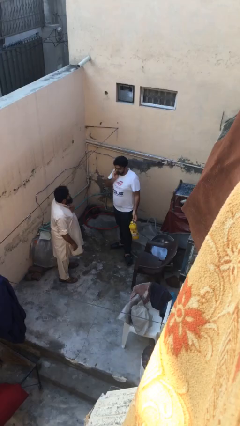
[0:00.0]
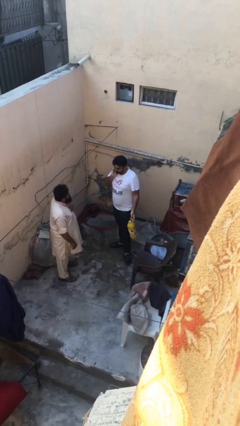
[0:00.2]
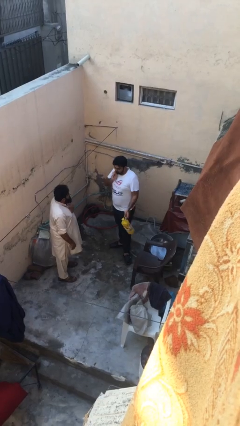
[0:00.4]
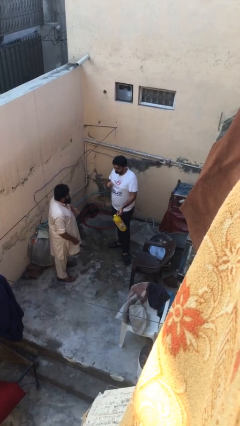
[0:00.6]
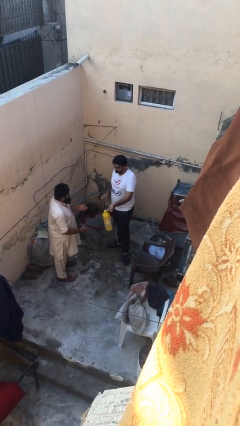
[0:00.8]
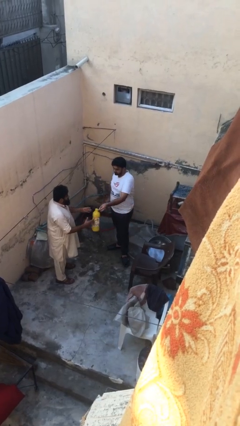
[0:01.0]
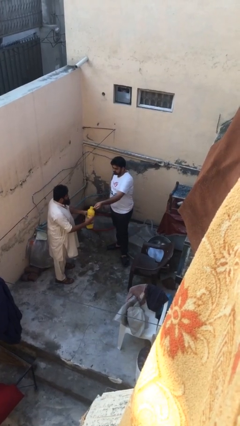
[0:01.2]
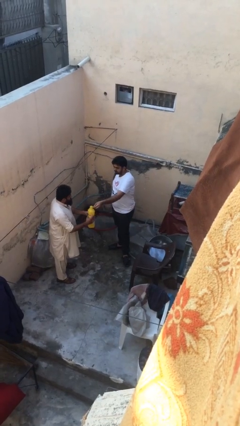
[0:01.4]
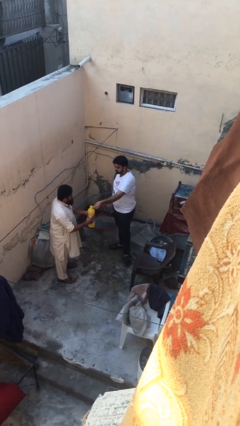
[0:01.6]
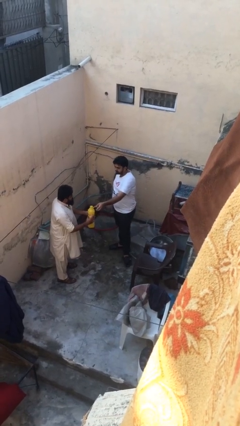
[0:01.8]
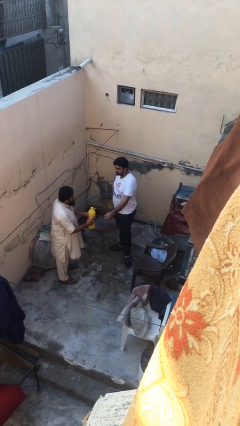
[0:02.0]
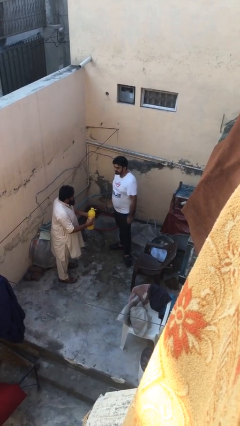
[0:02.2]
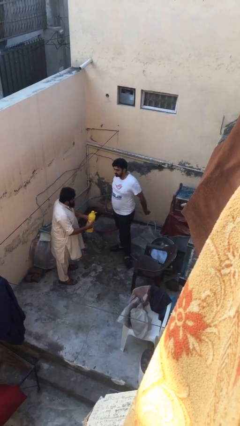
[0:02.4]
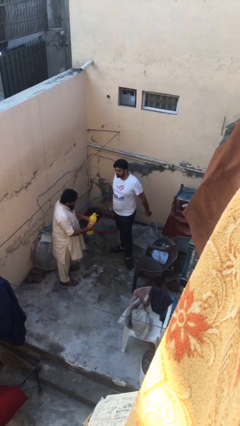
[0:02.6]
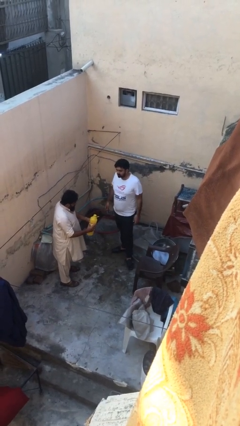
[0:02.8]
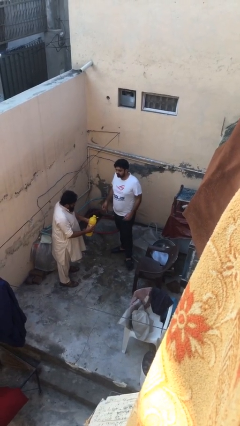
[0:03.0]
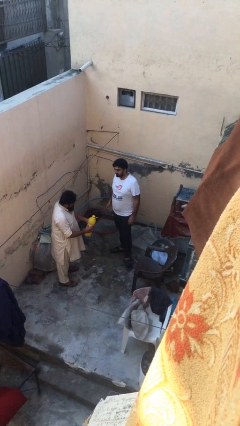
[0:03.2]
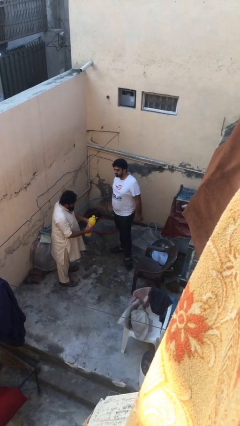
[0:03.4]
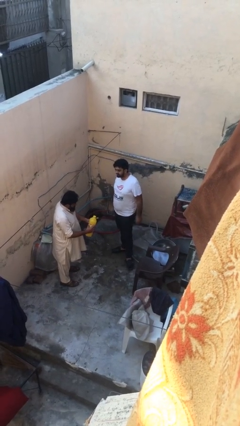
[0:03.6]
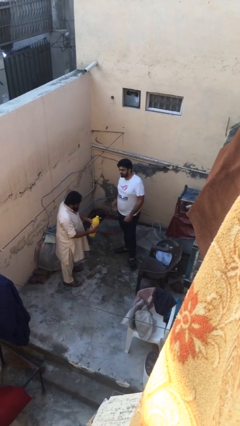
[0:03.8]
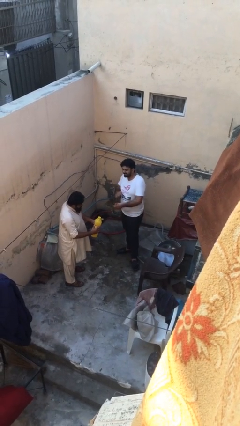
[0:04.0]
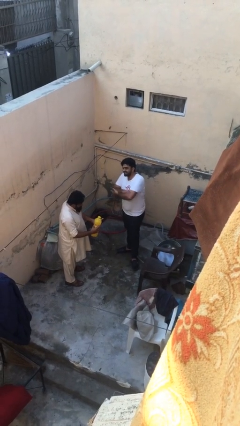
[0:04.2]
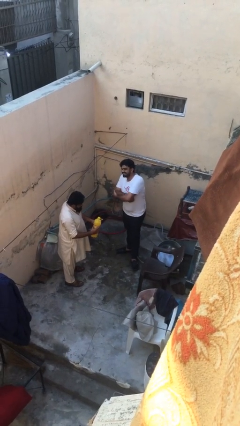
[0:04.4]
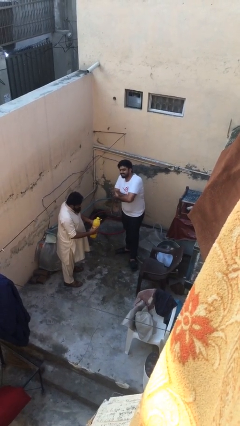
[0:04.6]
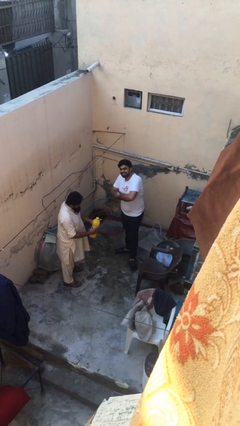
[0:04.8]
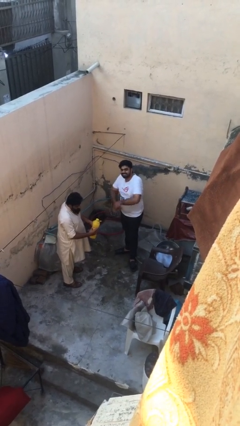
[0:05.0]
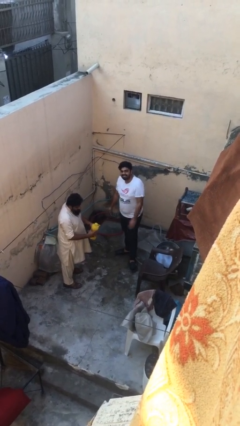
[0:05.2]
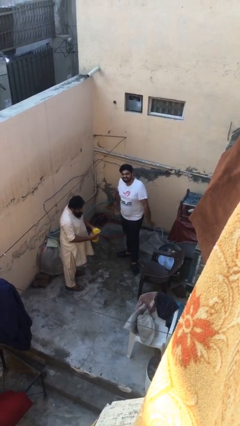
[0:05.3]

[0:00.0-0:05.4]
person transfers object to person

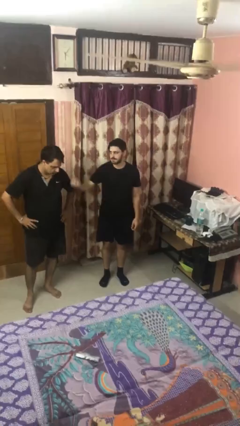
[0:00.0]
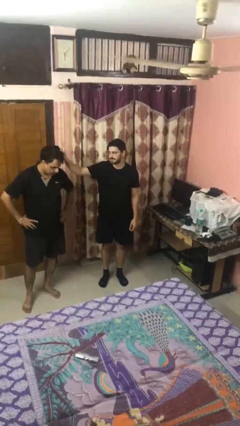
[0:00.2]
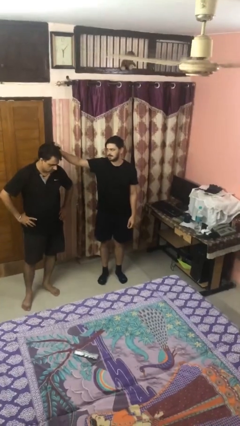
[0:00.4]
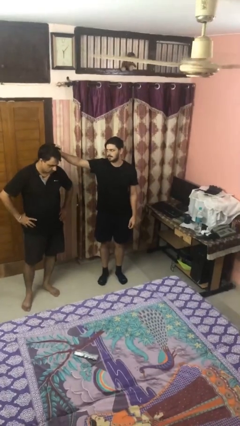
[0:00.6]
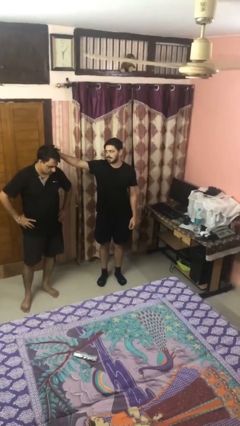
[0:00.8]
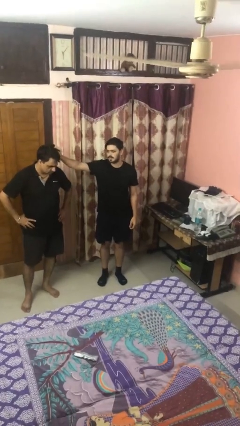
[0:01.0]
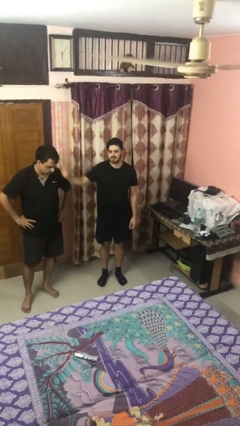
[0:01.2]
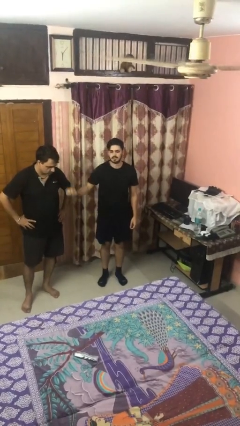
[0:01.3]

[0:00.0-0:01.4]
person grabs person by hair

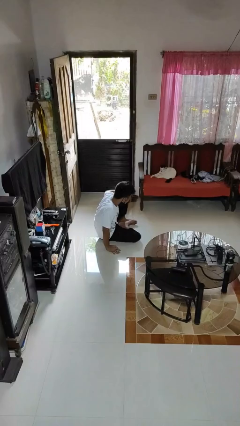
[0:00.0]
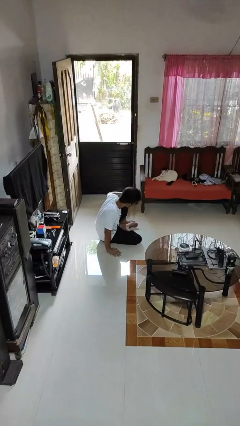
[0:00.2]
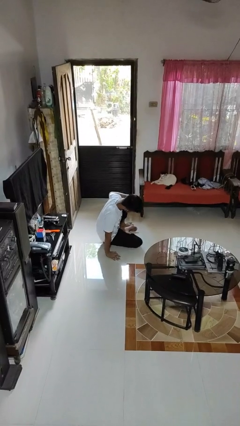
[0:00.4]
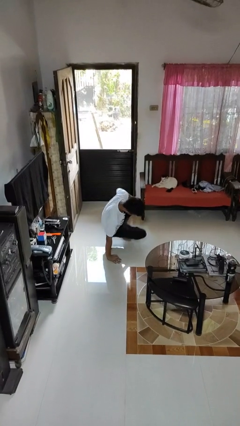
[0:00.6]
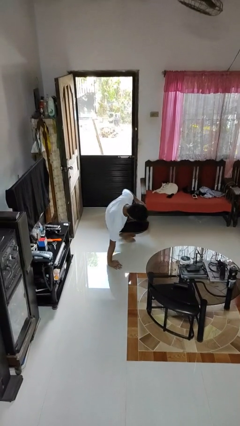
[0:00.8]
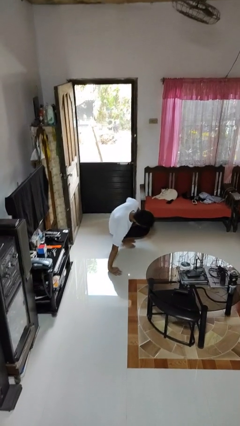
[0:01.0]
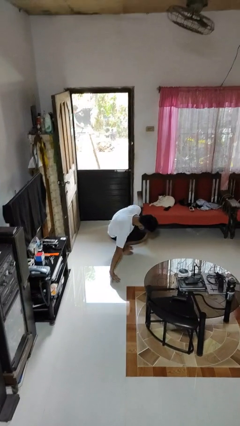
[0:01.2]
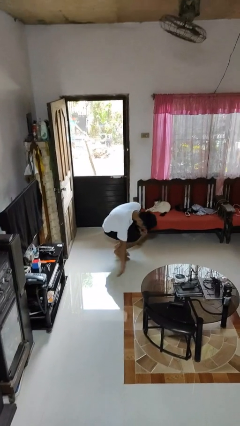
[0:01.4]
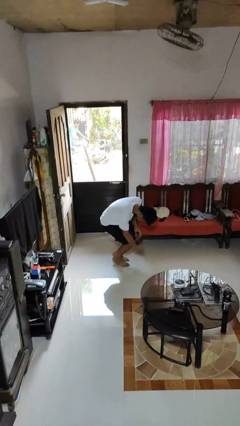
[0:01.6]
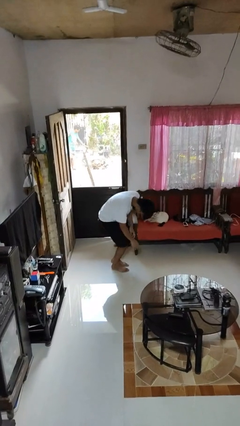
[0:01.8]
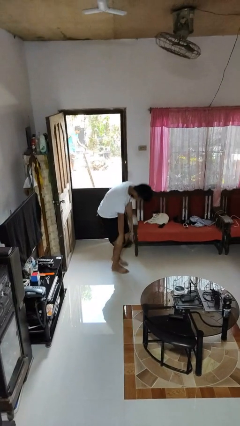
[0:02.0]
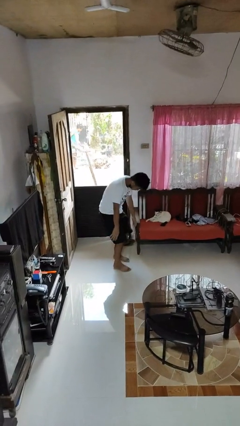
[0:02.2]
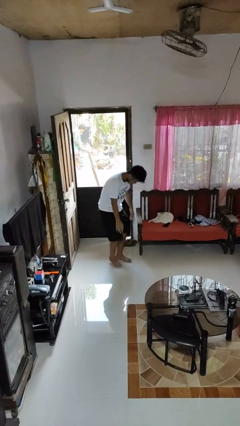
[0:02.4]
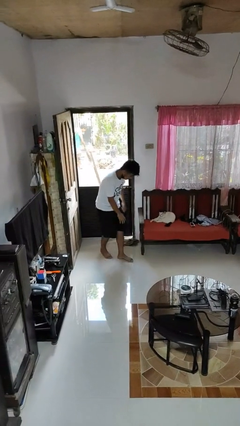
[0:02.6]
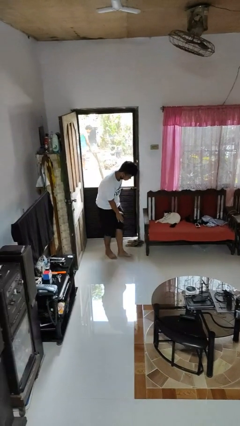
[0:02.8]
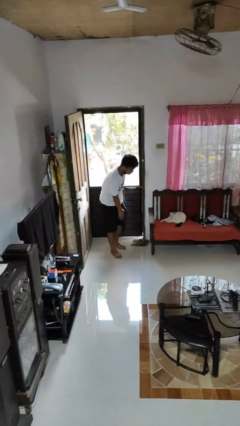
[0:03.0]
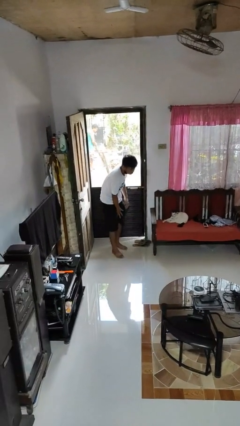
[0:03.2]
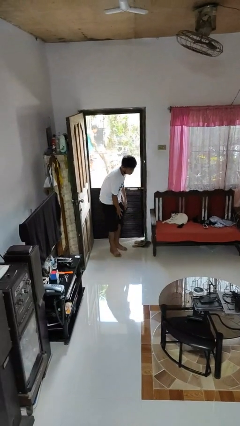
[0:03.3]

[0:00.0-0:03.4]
person stands up from floor

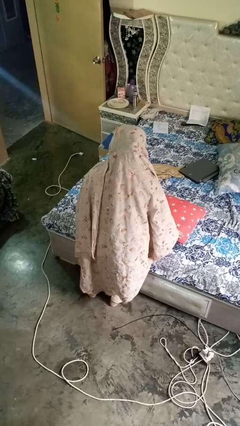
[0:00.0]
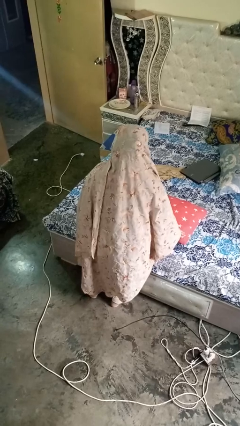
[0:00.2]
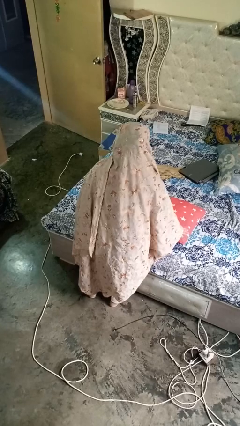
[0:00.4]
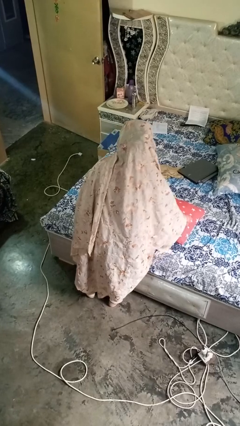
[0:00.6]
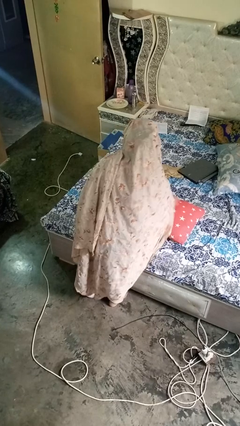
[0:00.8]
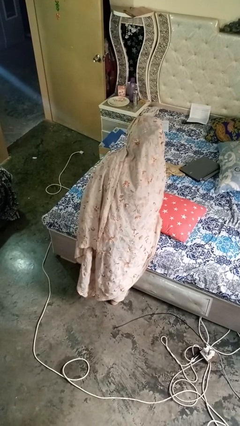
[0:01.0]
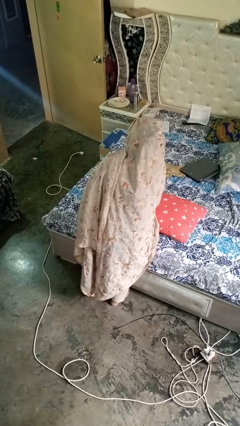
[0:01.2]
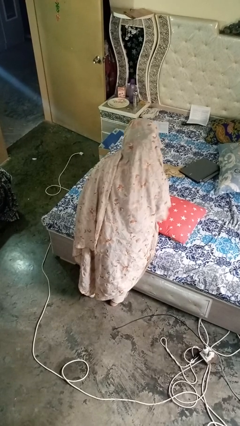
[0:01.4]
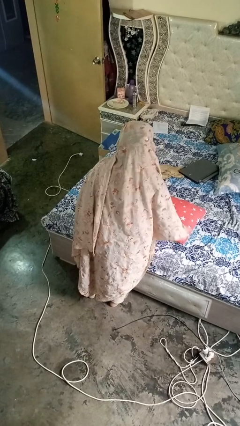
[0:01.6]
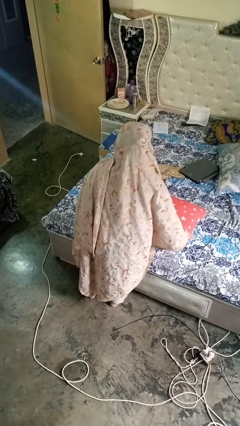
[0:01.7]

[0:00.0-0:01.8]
person waves hand over object

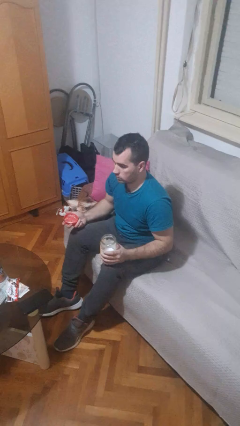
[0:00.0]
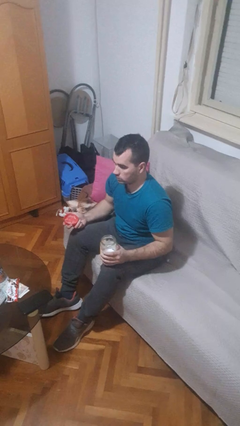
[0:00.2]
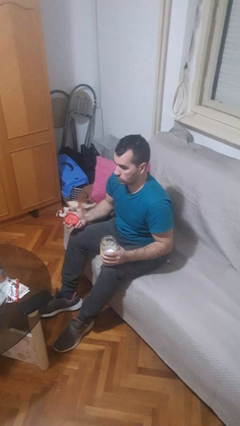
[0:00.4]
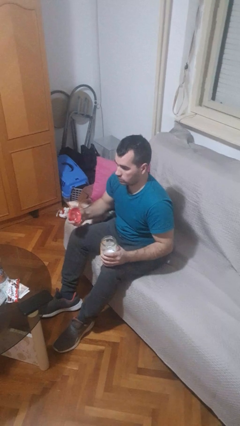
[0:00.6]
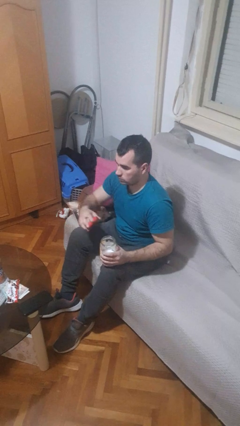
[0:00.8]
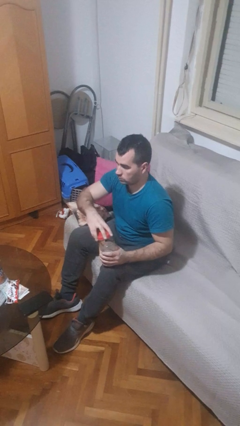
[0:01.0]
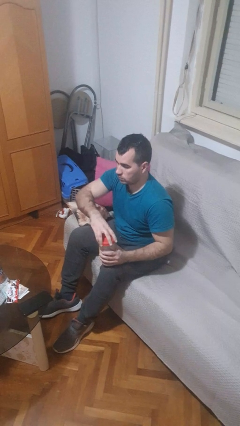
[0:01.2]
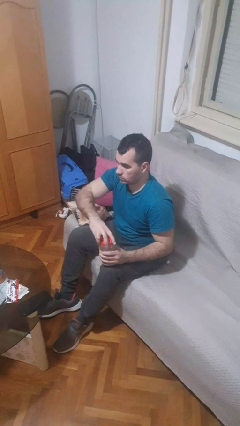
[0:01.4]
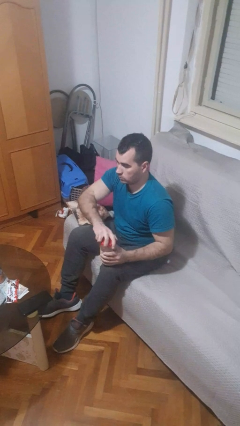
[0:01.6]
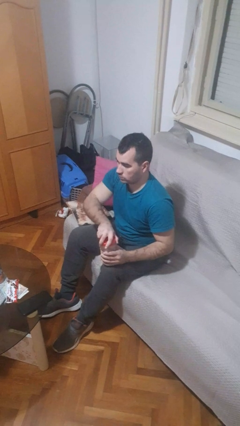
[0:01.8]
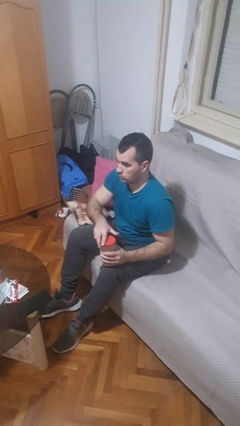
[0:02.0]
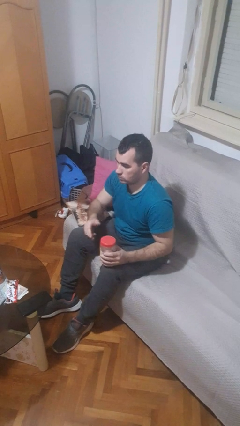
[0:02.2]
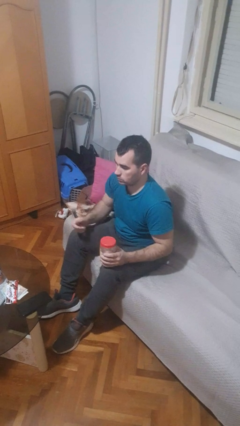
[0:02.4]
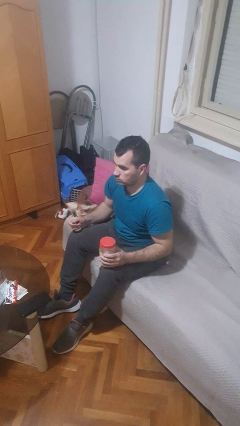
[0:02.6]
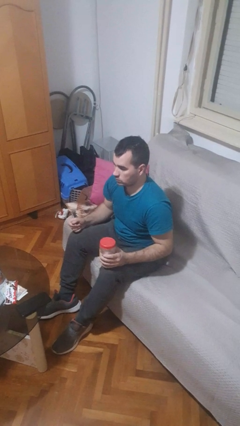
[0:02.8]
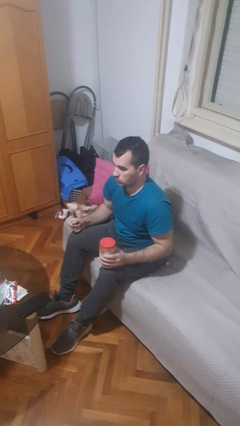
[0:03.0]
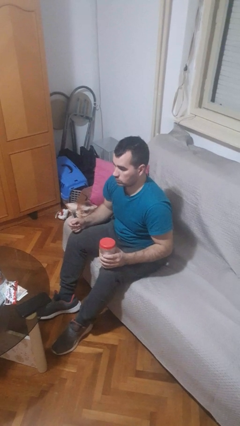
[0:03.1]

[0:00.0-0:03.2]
person closes jar

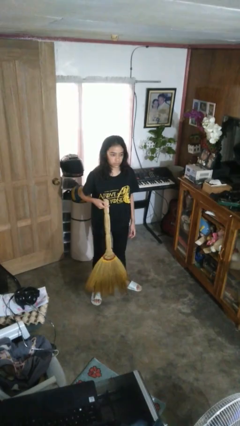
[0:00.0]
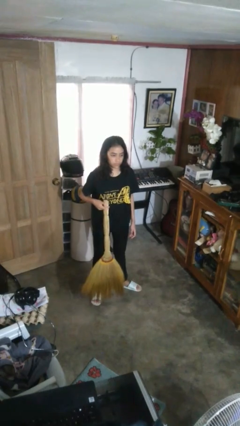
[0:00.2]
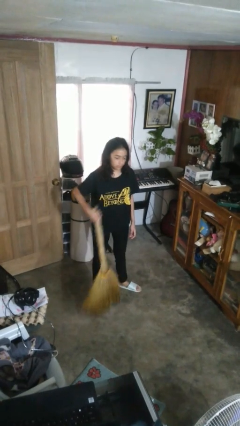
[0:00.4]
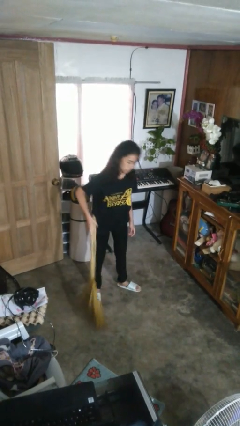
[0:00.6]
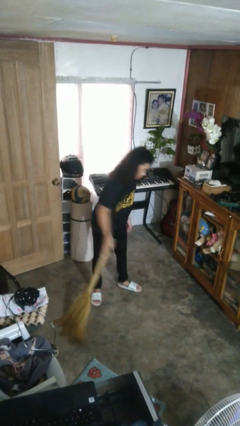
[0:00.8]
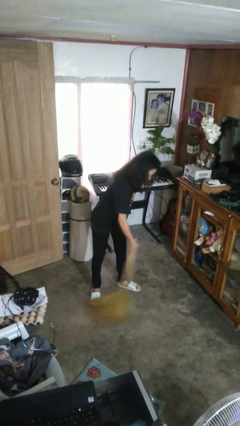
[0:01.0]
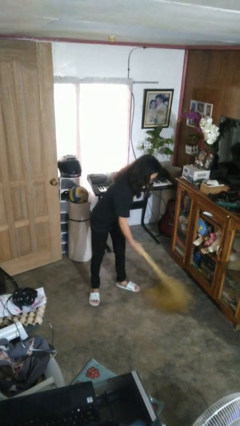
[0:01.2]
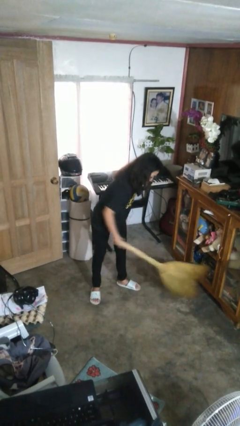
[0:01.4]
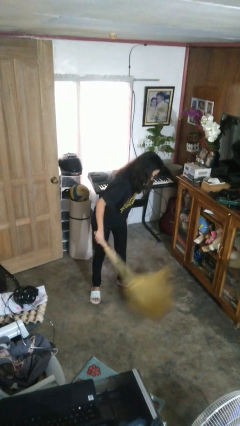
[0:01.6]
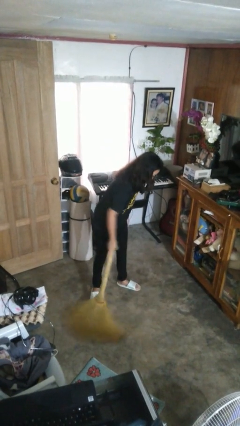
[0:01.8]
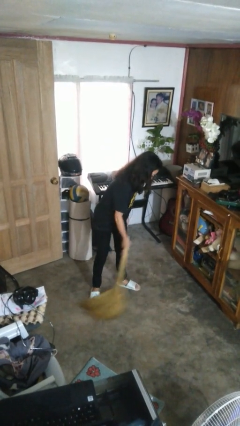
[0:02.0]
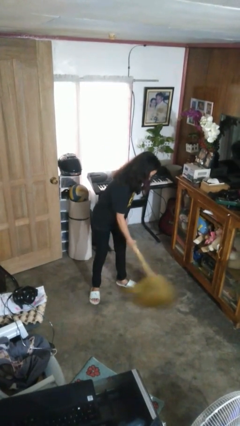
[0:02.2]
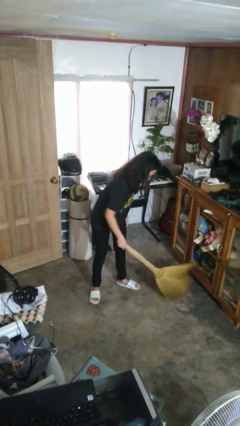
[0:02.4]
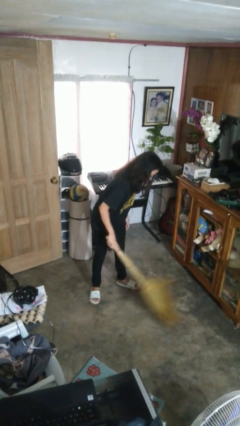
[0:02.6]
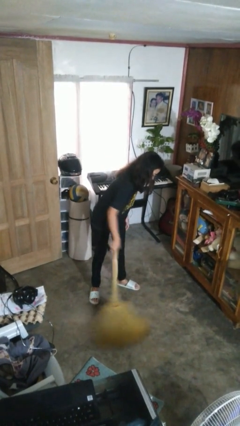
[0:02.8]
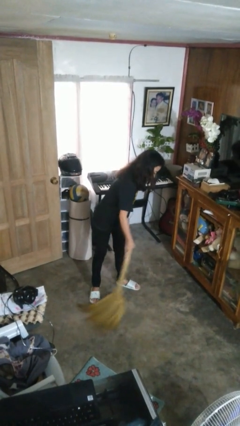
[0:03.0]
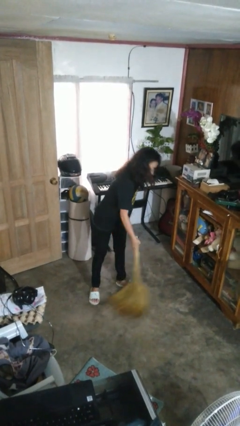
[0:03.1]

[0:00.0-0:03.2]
person sweeps floor
